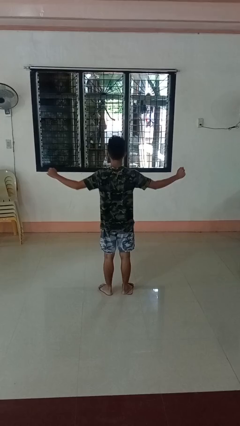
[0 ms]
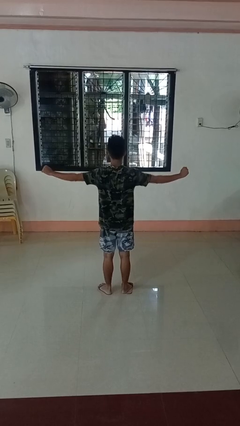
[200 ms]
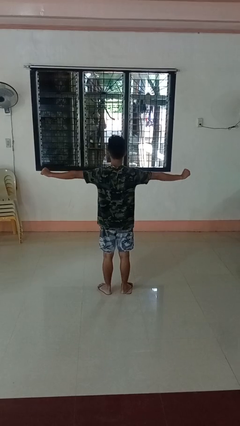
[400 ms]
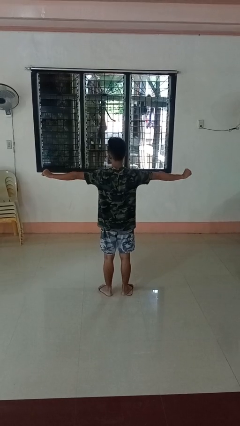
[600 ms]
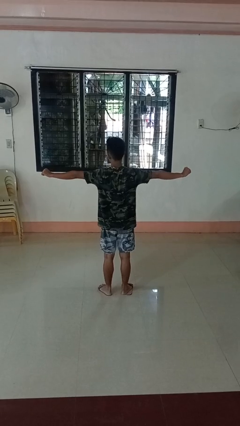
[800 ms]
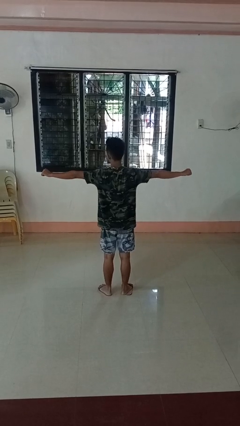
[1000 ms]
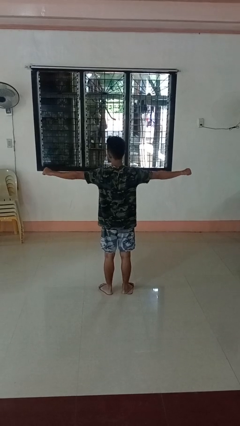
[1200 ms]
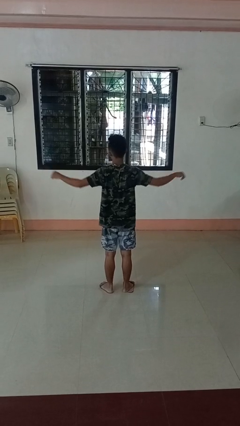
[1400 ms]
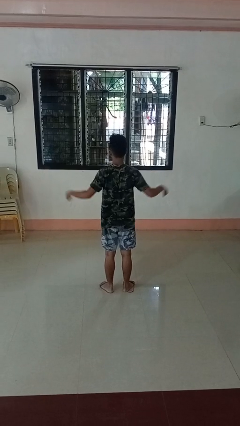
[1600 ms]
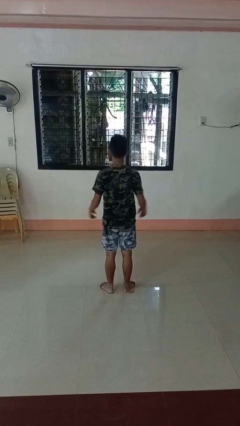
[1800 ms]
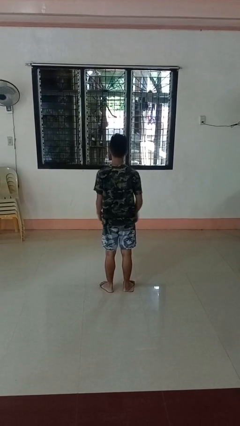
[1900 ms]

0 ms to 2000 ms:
person stretches arms to side

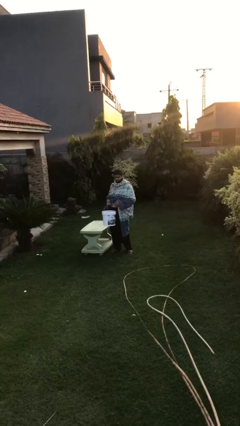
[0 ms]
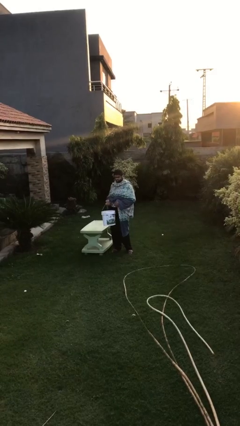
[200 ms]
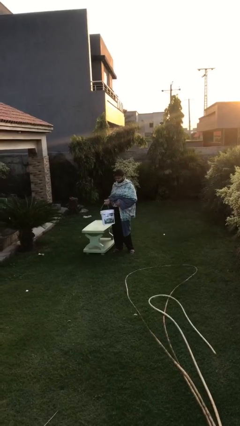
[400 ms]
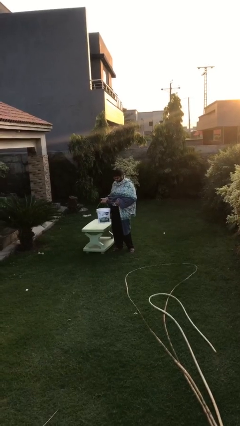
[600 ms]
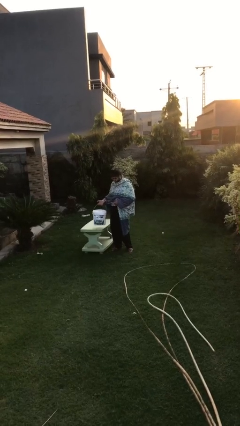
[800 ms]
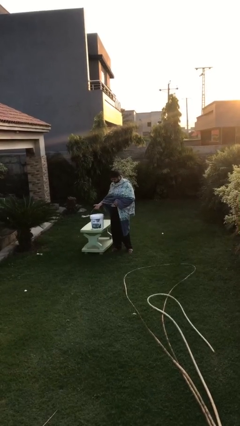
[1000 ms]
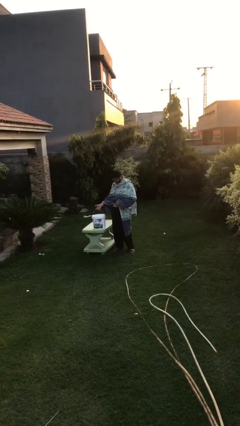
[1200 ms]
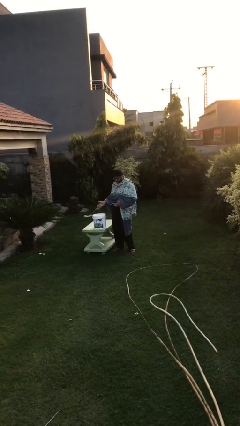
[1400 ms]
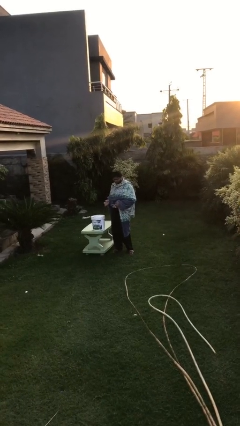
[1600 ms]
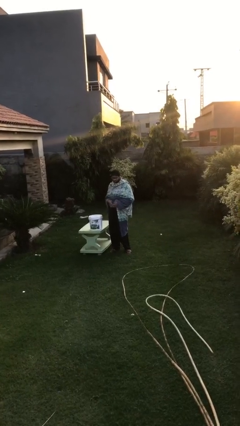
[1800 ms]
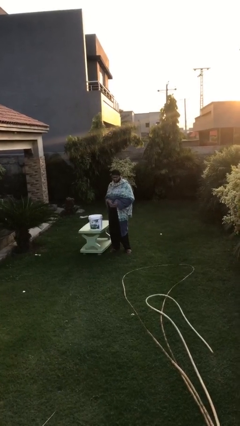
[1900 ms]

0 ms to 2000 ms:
person puts down object on table

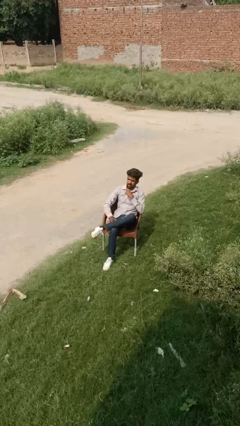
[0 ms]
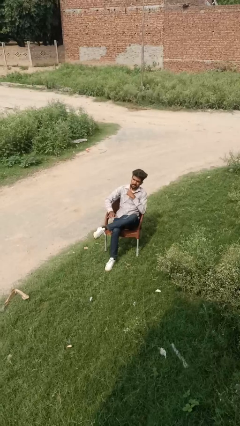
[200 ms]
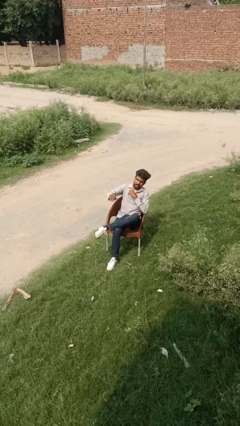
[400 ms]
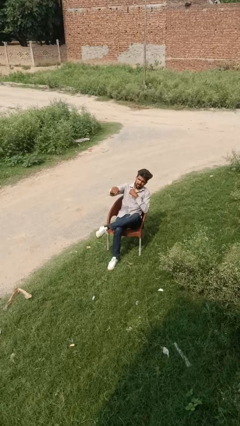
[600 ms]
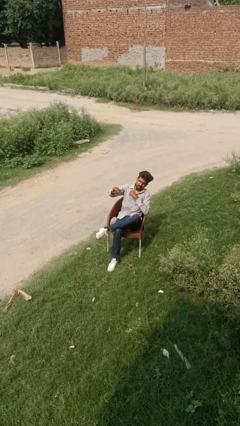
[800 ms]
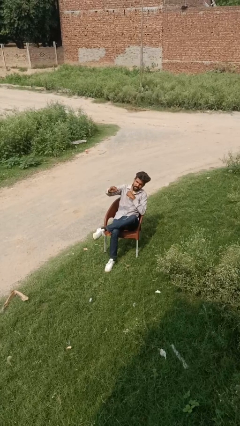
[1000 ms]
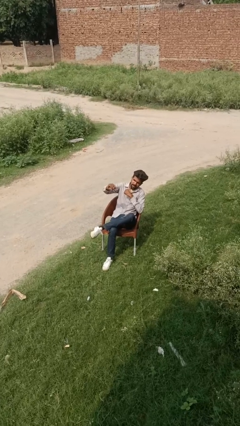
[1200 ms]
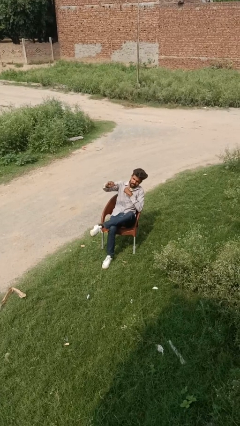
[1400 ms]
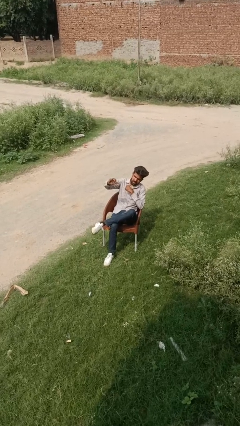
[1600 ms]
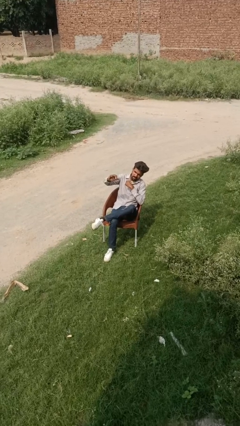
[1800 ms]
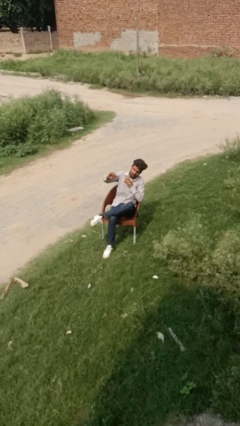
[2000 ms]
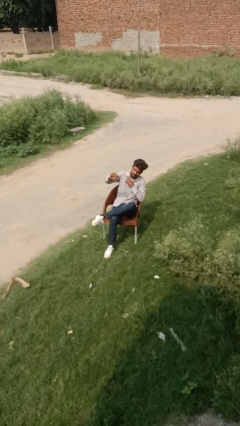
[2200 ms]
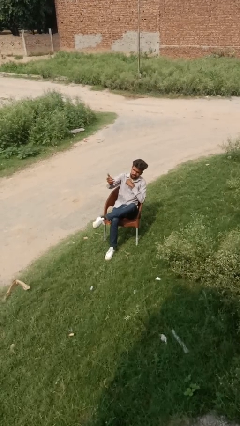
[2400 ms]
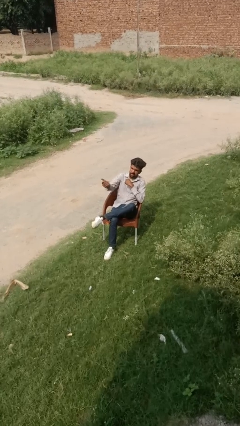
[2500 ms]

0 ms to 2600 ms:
person gestures come here

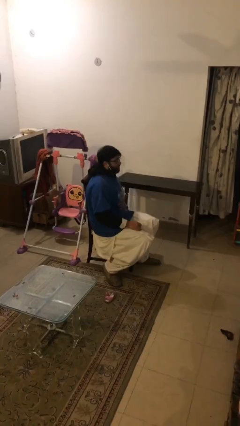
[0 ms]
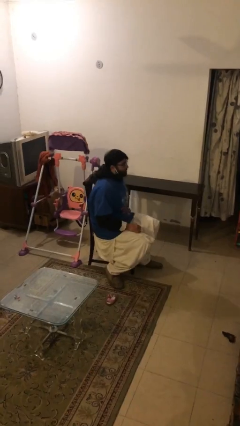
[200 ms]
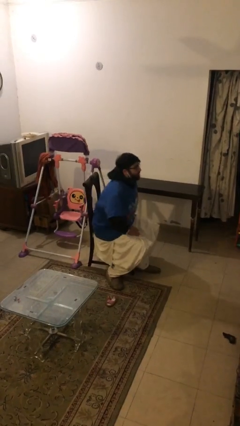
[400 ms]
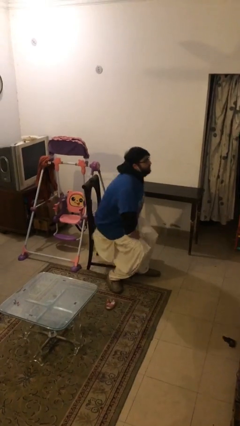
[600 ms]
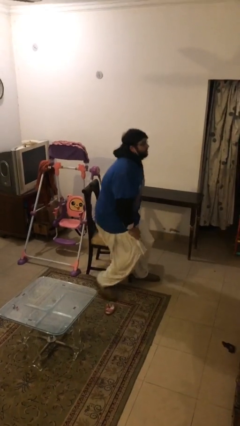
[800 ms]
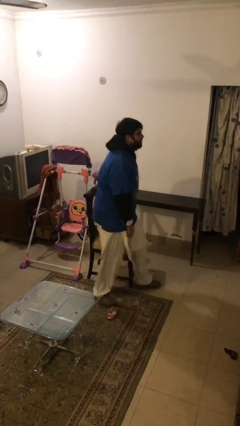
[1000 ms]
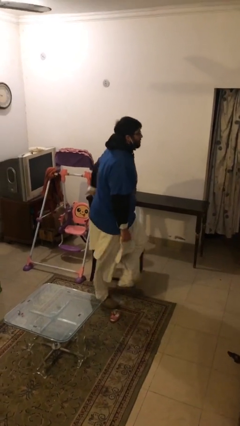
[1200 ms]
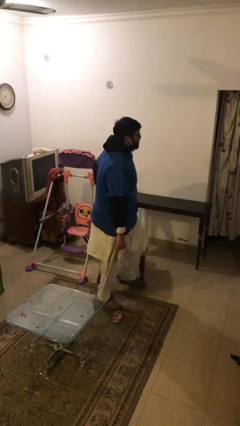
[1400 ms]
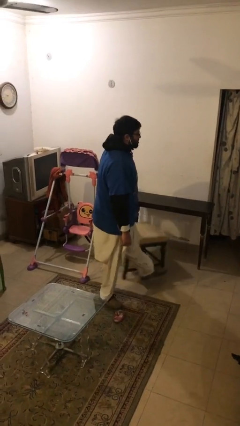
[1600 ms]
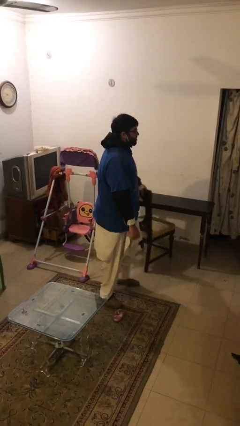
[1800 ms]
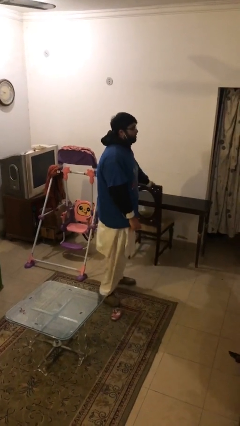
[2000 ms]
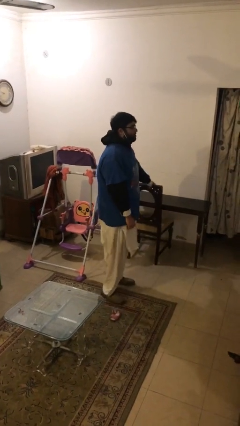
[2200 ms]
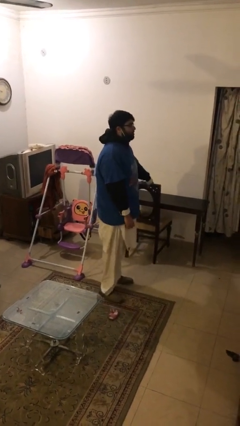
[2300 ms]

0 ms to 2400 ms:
person stands up

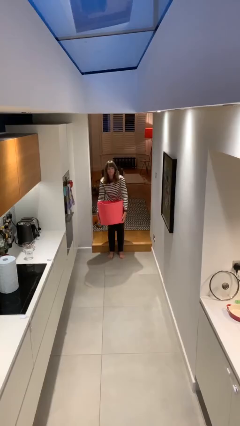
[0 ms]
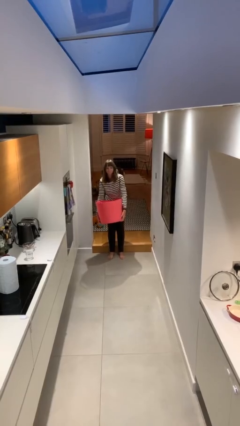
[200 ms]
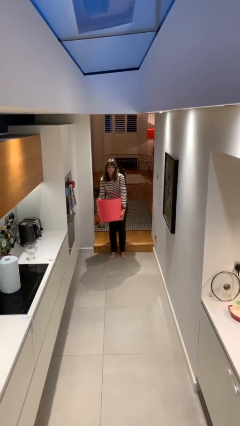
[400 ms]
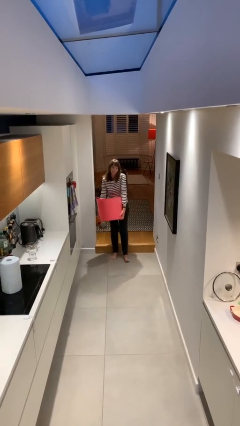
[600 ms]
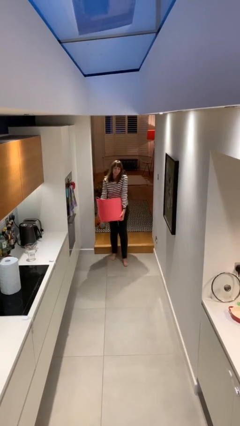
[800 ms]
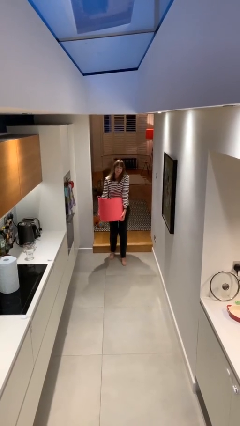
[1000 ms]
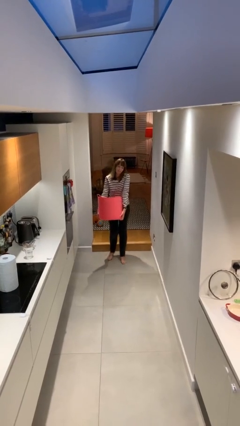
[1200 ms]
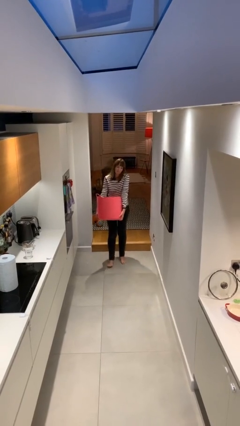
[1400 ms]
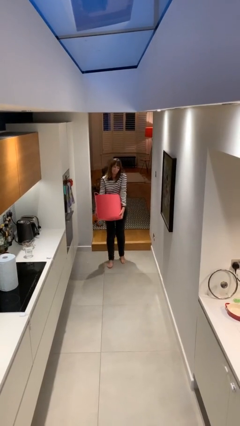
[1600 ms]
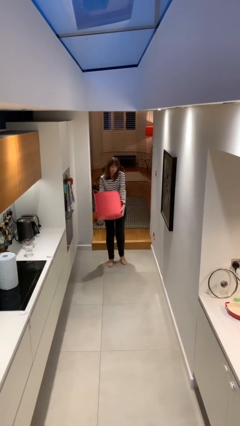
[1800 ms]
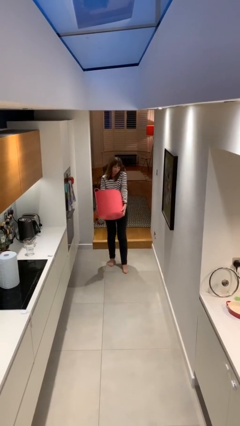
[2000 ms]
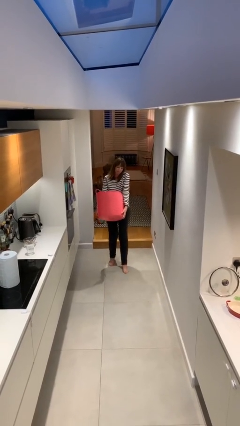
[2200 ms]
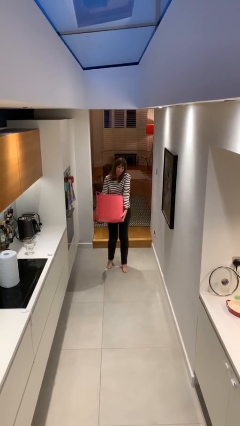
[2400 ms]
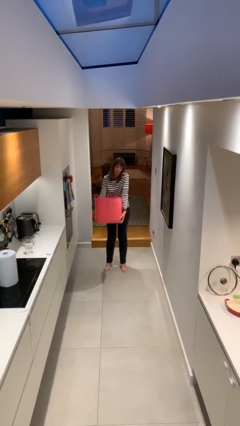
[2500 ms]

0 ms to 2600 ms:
person carries heavy object

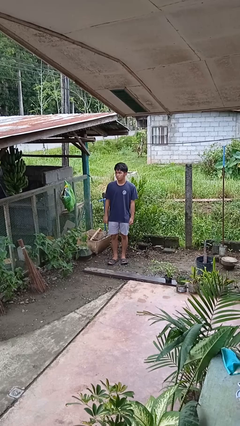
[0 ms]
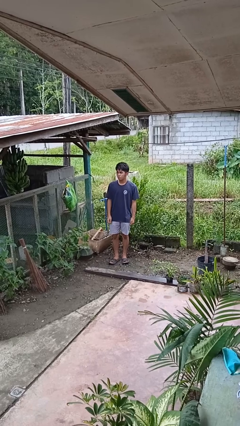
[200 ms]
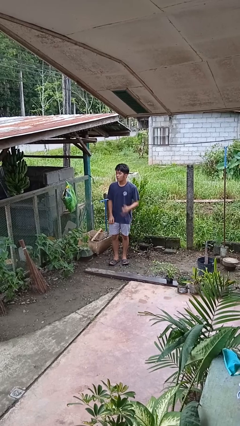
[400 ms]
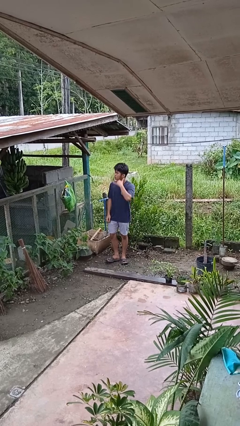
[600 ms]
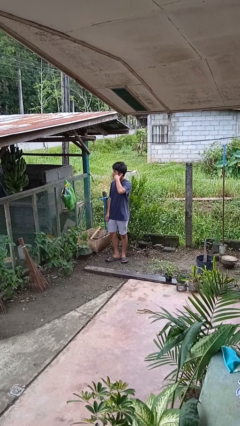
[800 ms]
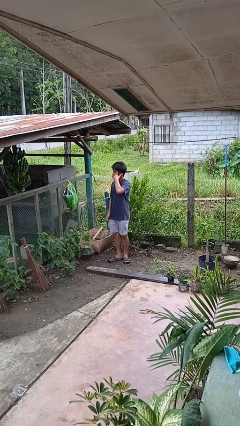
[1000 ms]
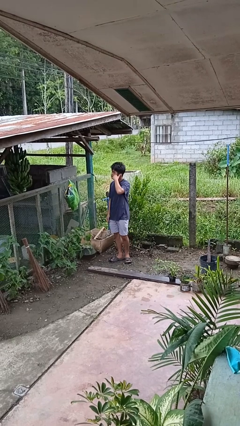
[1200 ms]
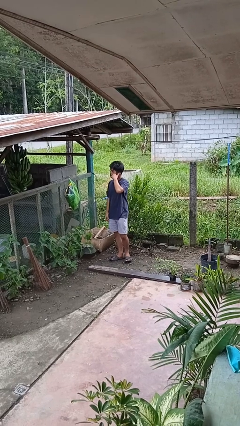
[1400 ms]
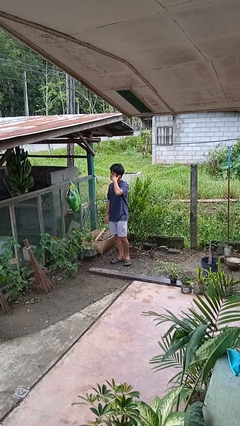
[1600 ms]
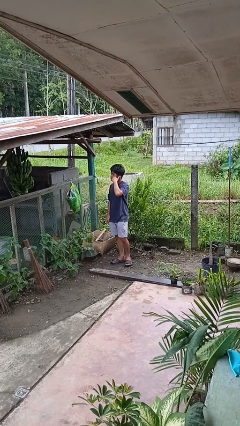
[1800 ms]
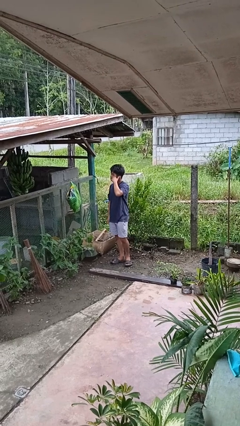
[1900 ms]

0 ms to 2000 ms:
person gestures call me

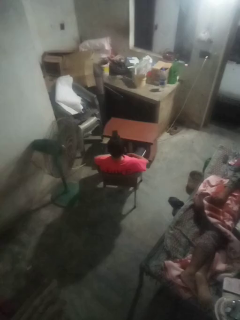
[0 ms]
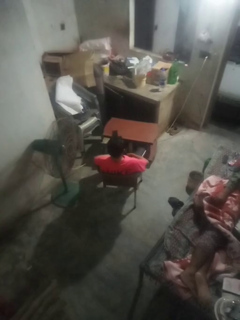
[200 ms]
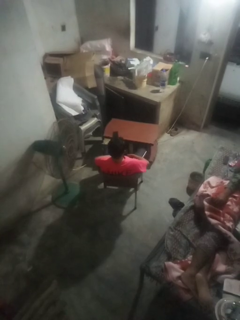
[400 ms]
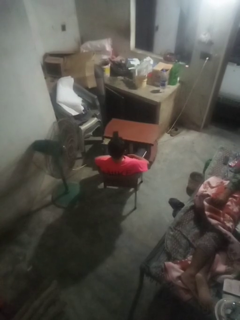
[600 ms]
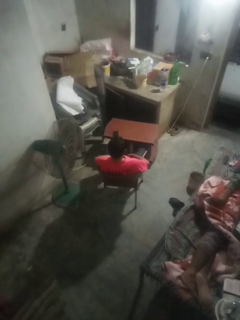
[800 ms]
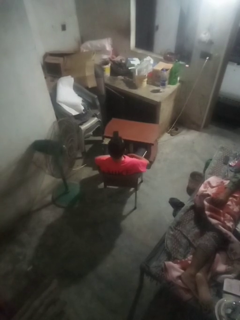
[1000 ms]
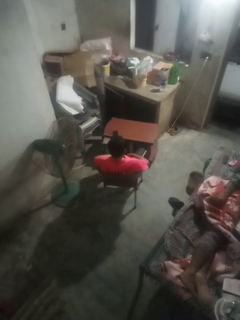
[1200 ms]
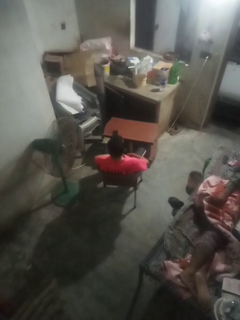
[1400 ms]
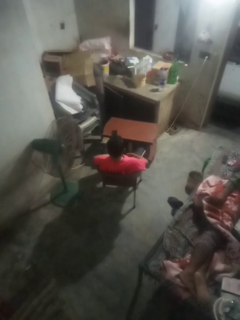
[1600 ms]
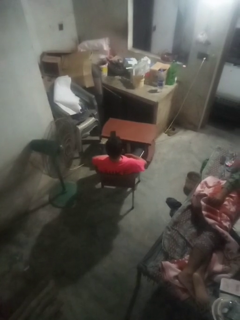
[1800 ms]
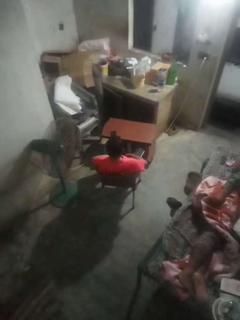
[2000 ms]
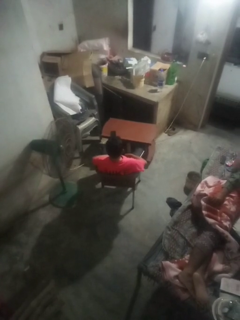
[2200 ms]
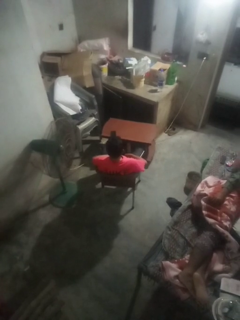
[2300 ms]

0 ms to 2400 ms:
person nods head

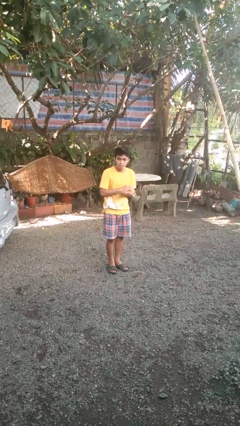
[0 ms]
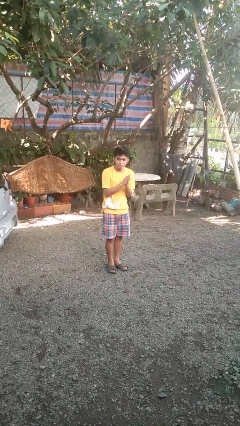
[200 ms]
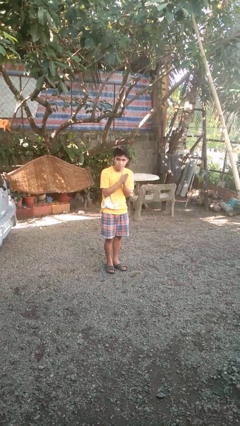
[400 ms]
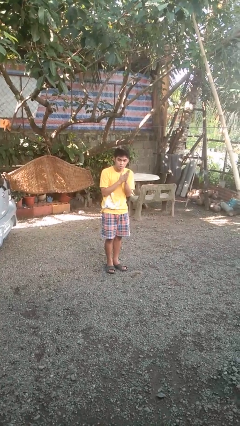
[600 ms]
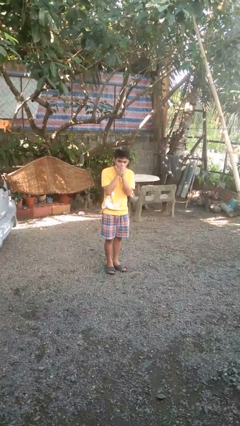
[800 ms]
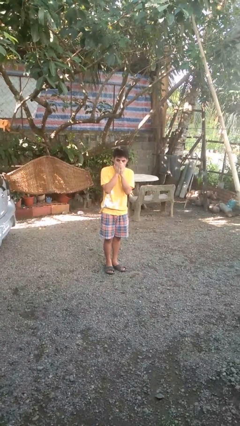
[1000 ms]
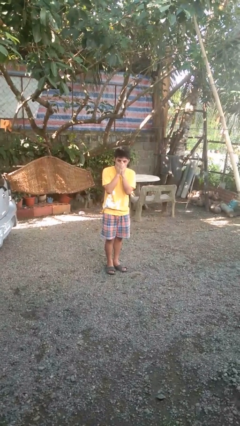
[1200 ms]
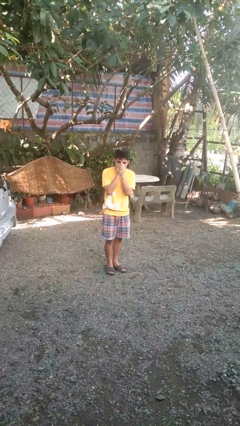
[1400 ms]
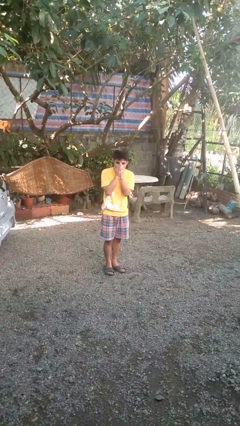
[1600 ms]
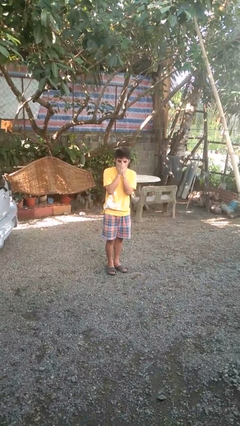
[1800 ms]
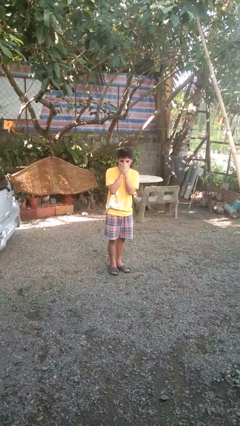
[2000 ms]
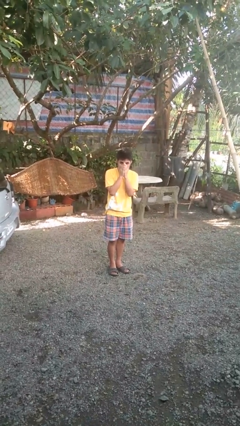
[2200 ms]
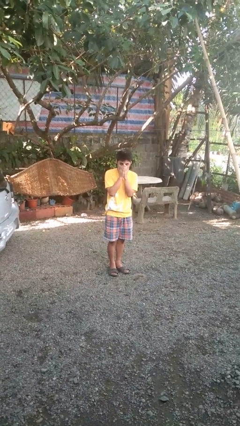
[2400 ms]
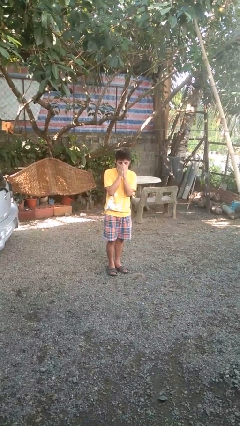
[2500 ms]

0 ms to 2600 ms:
person blows into hands
